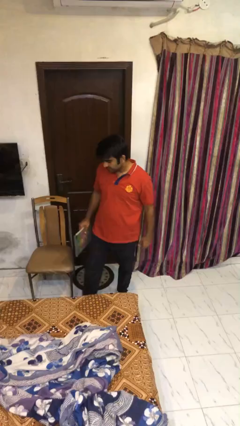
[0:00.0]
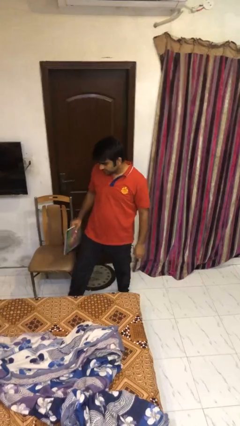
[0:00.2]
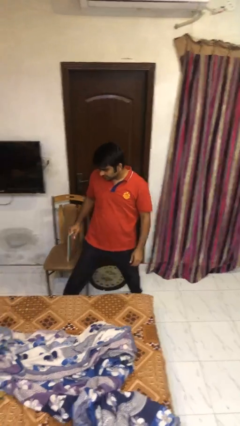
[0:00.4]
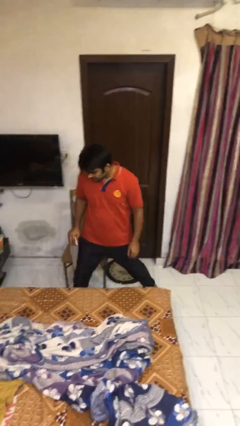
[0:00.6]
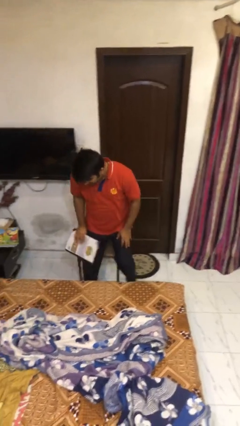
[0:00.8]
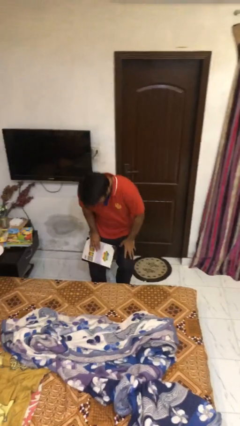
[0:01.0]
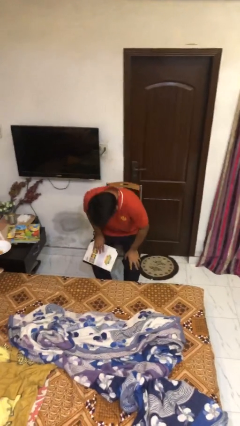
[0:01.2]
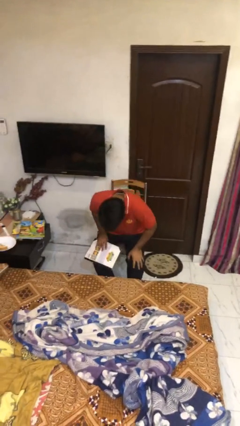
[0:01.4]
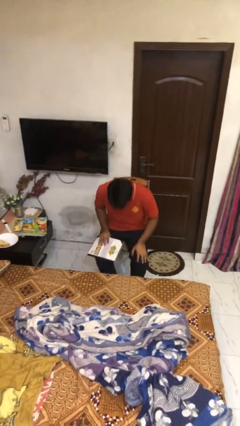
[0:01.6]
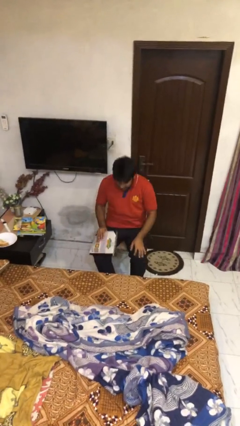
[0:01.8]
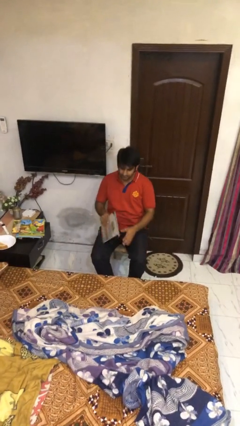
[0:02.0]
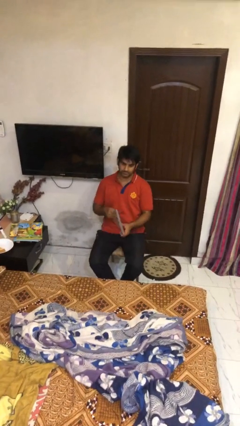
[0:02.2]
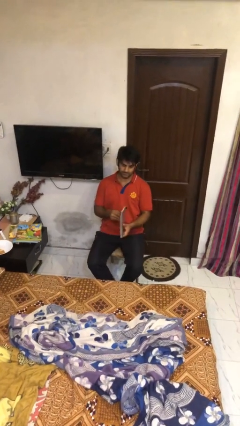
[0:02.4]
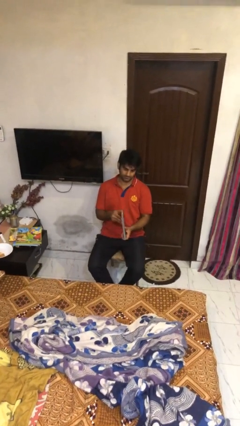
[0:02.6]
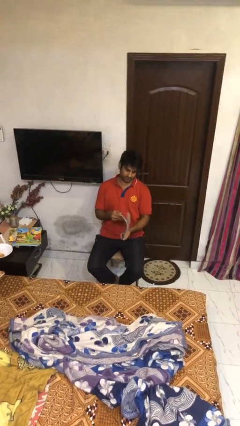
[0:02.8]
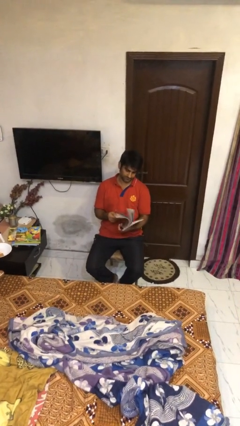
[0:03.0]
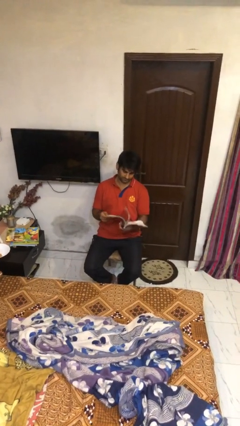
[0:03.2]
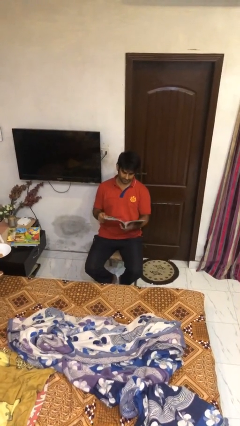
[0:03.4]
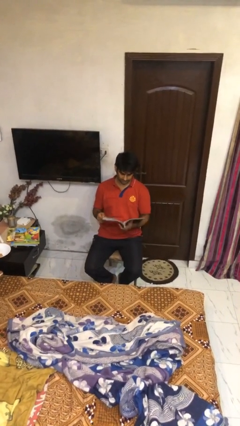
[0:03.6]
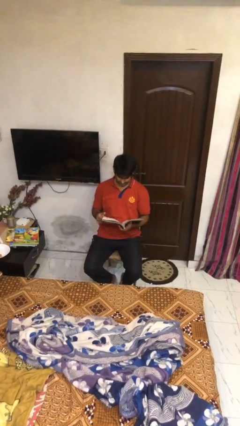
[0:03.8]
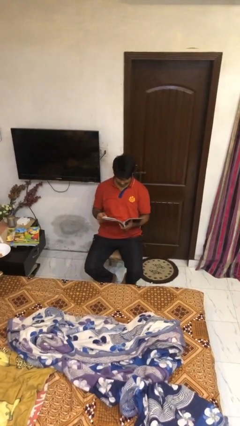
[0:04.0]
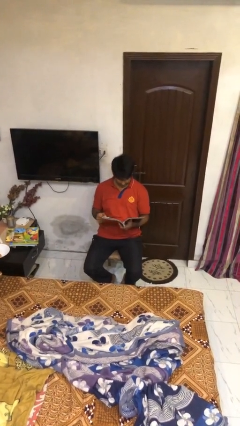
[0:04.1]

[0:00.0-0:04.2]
person sits down

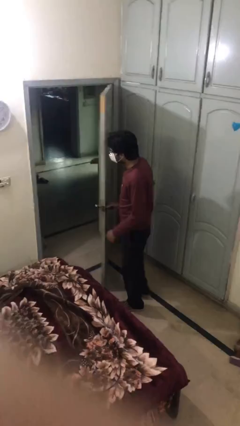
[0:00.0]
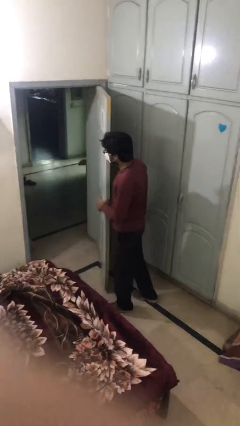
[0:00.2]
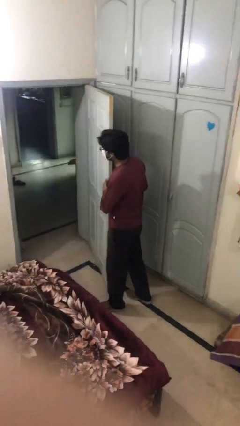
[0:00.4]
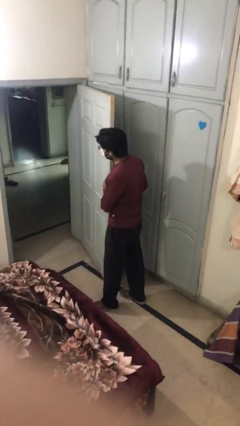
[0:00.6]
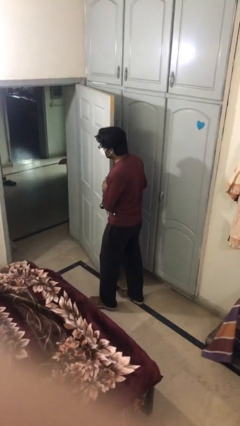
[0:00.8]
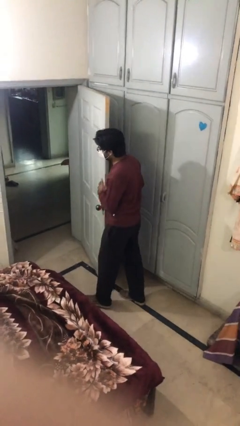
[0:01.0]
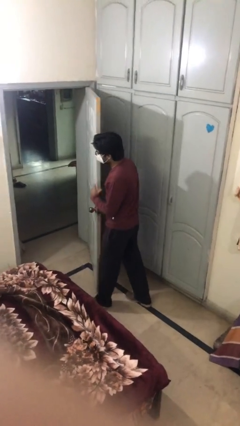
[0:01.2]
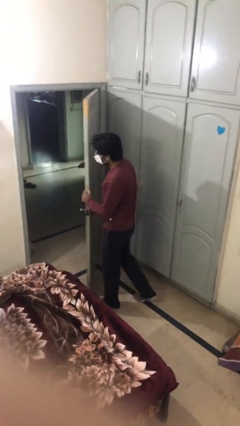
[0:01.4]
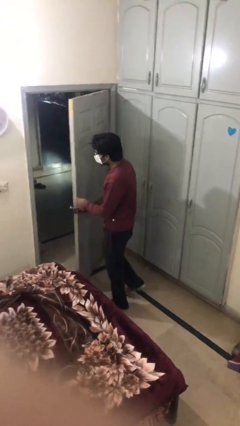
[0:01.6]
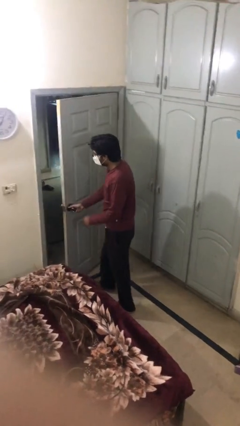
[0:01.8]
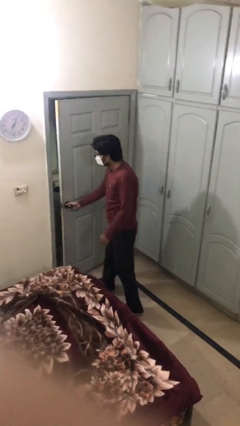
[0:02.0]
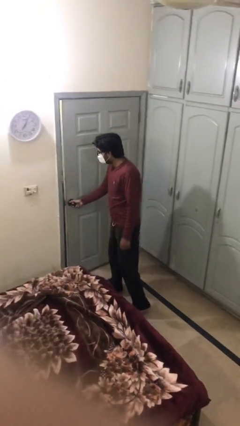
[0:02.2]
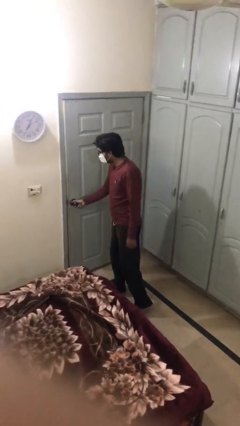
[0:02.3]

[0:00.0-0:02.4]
person closes facility door

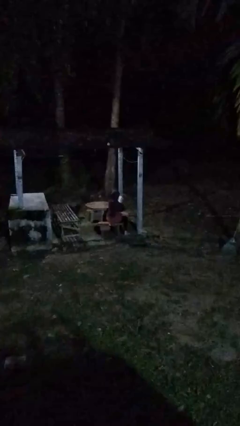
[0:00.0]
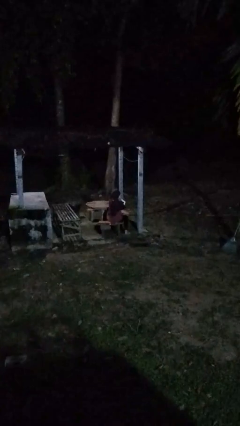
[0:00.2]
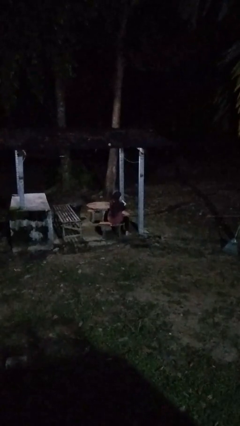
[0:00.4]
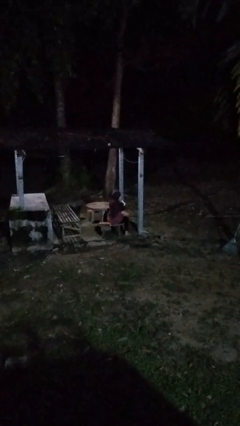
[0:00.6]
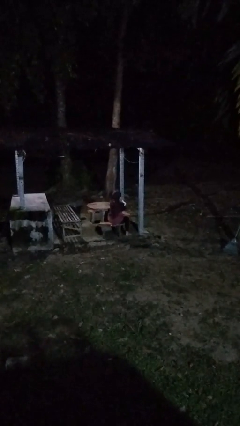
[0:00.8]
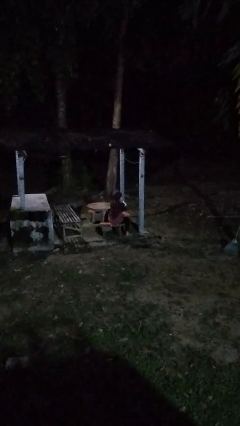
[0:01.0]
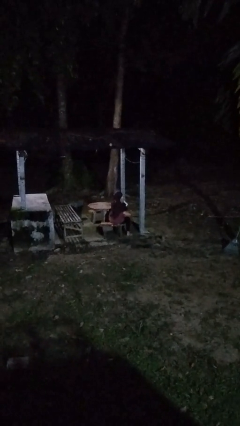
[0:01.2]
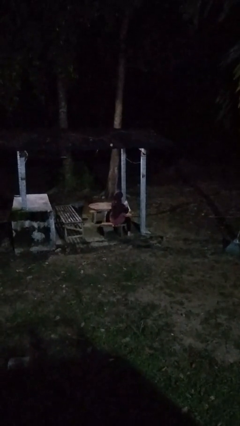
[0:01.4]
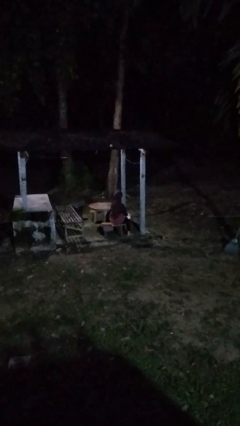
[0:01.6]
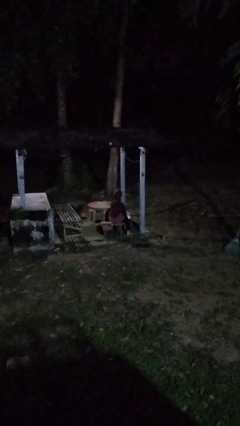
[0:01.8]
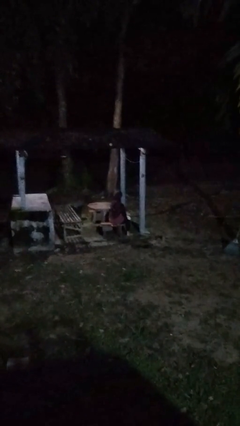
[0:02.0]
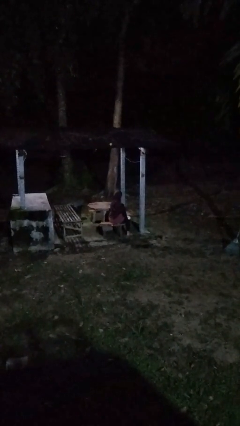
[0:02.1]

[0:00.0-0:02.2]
person blows nose

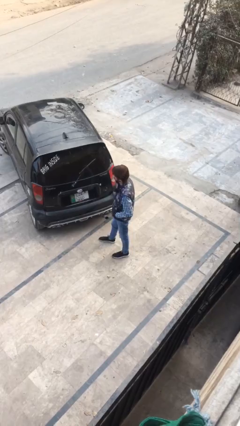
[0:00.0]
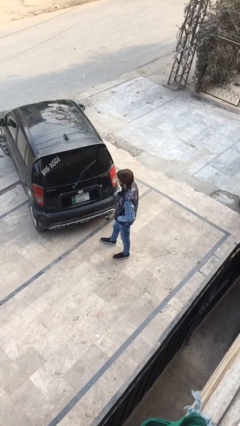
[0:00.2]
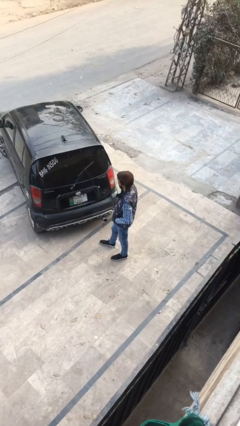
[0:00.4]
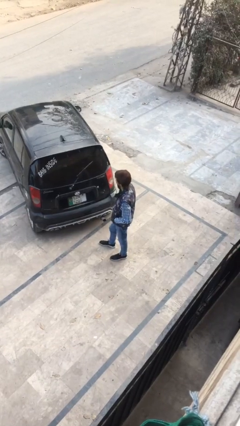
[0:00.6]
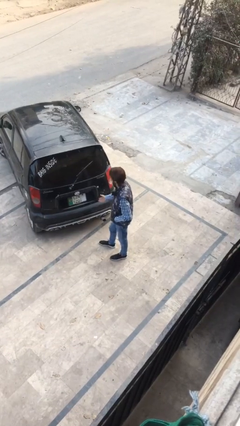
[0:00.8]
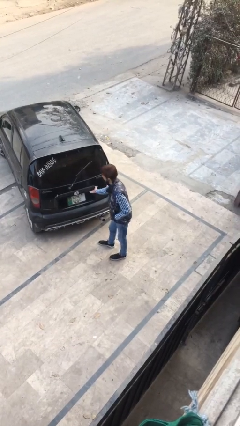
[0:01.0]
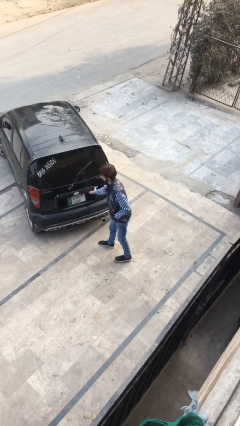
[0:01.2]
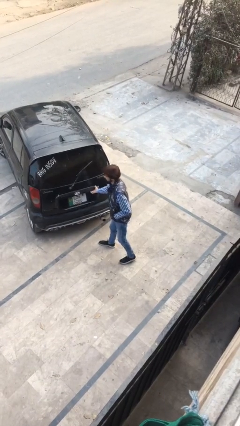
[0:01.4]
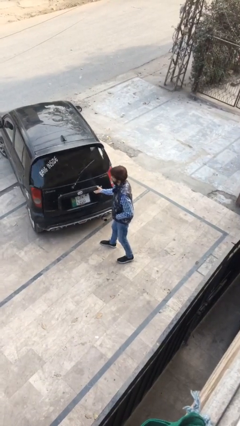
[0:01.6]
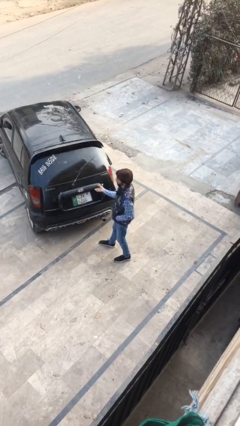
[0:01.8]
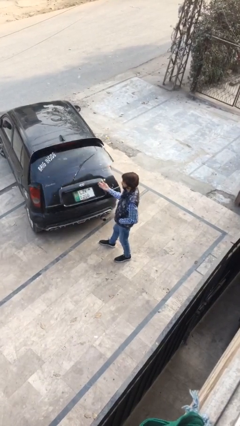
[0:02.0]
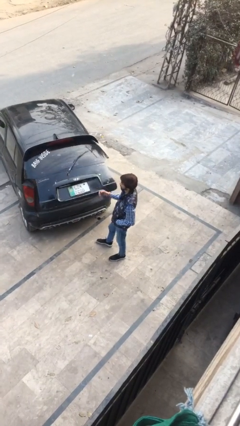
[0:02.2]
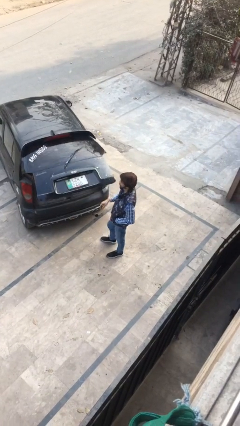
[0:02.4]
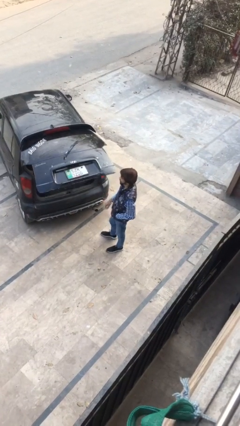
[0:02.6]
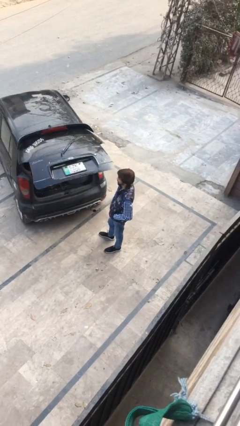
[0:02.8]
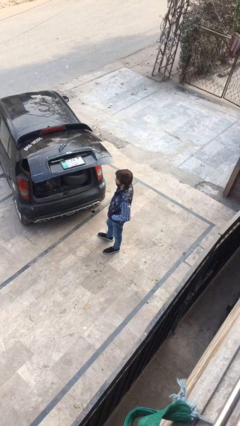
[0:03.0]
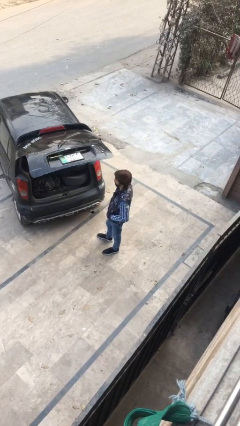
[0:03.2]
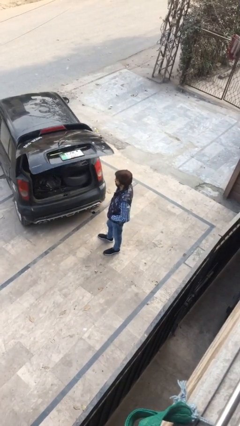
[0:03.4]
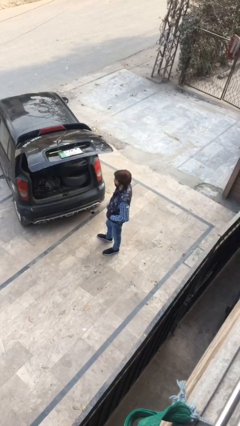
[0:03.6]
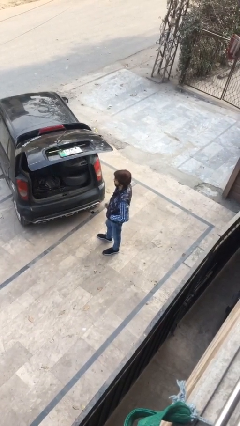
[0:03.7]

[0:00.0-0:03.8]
person opens car trunk

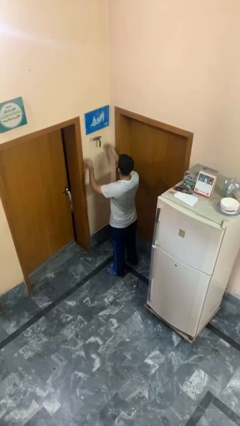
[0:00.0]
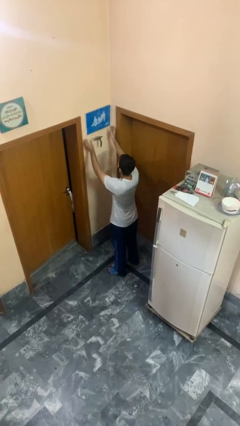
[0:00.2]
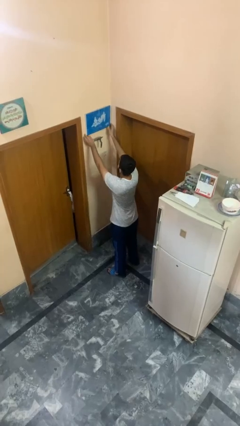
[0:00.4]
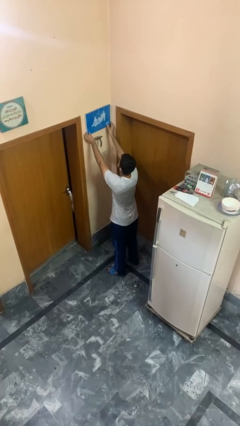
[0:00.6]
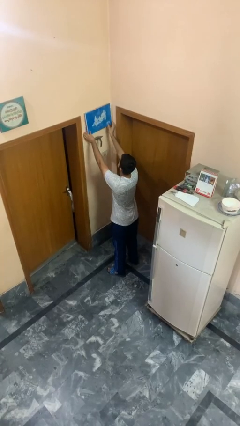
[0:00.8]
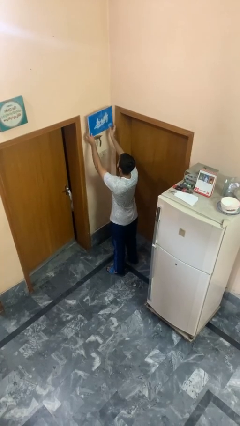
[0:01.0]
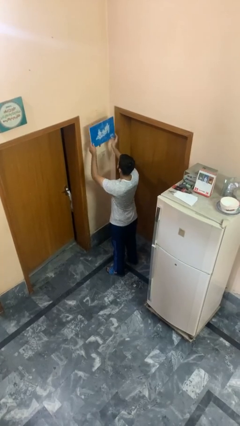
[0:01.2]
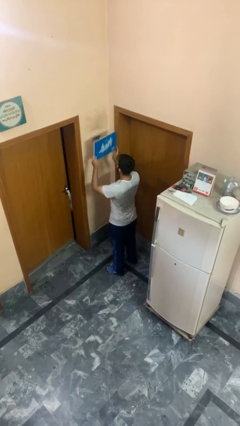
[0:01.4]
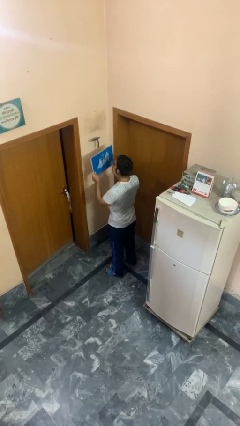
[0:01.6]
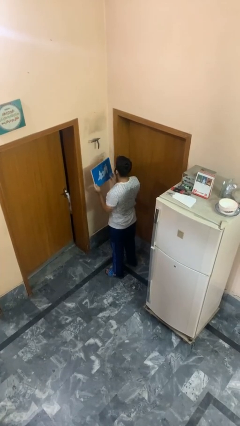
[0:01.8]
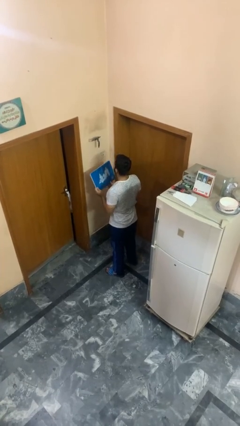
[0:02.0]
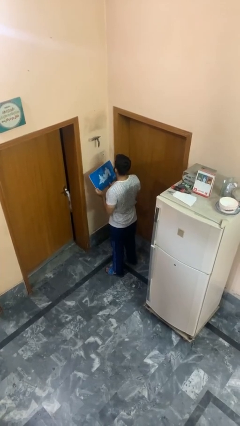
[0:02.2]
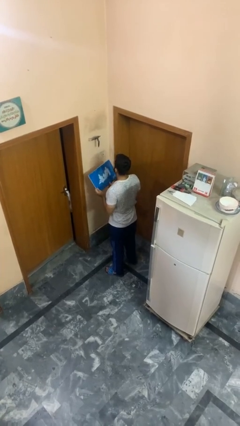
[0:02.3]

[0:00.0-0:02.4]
person takes down picture frame

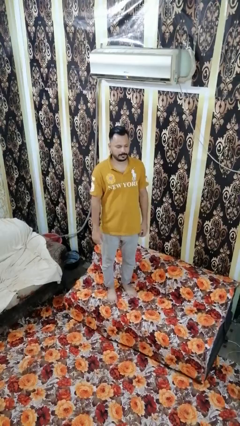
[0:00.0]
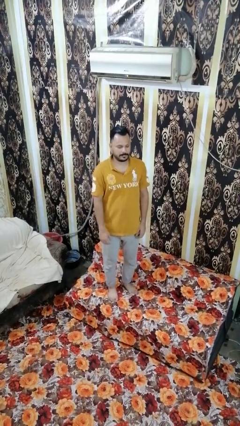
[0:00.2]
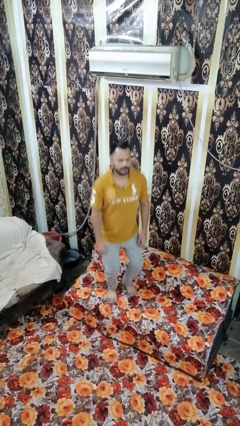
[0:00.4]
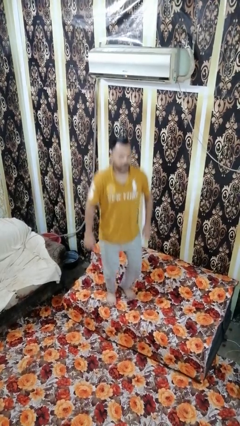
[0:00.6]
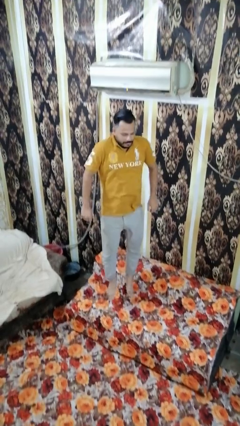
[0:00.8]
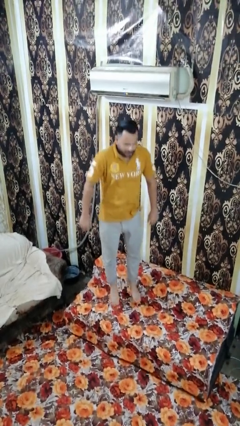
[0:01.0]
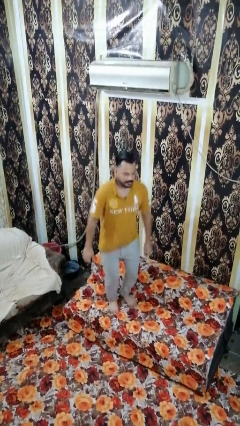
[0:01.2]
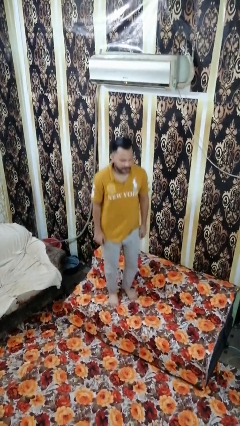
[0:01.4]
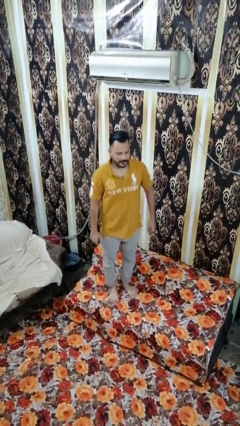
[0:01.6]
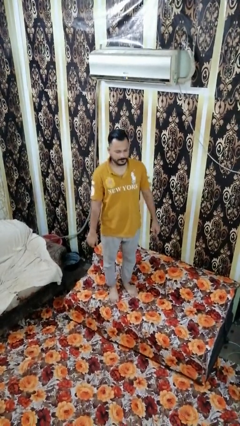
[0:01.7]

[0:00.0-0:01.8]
person jumps on couch

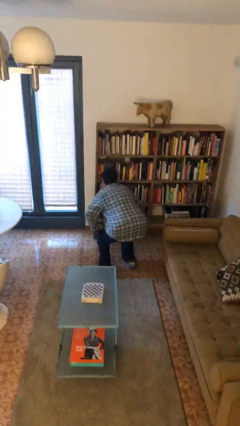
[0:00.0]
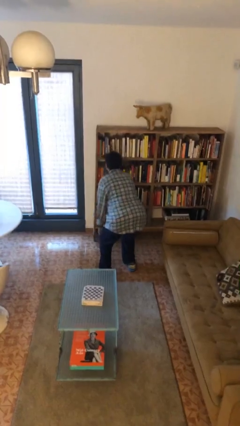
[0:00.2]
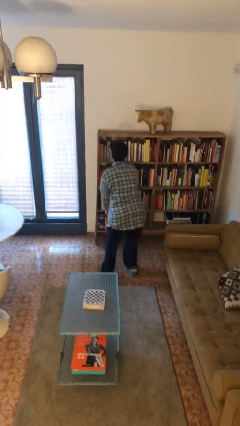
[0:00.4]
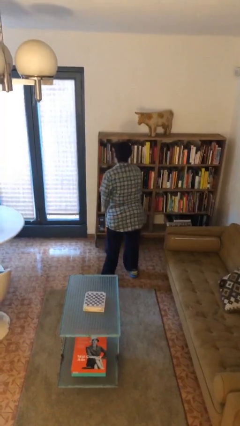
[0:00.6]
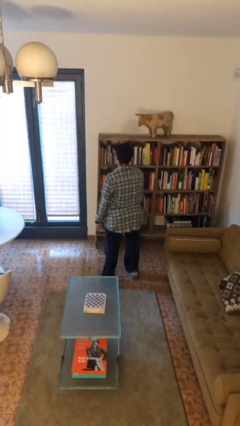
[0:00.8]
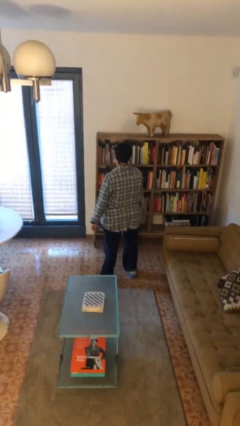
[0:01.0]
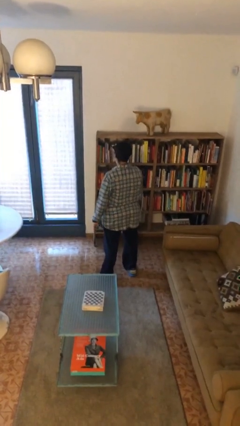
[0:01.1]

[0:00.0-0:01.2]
person stands up
